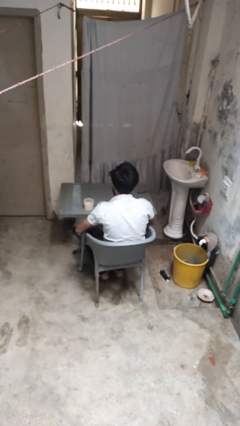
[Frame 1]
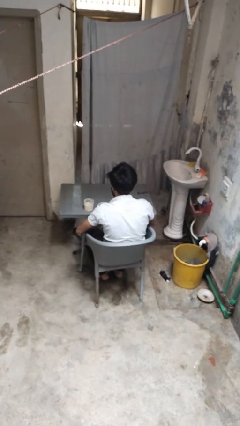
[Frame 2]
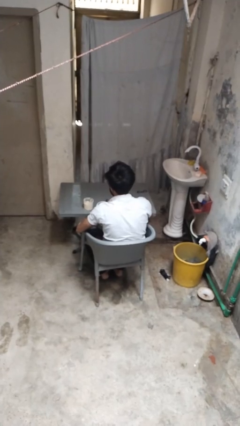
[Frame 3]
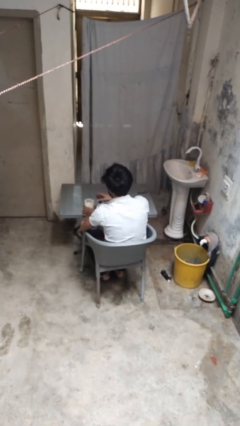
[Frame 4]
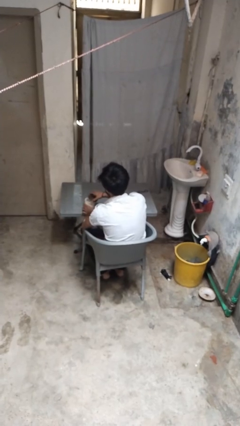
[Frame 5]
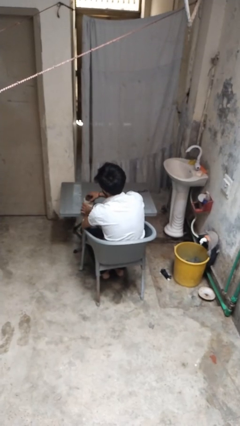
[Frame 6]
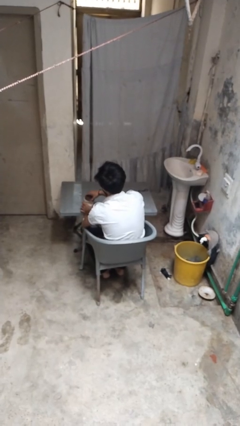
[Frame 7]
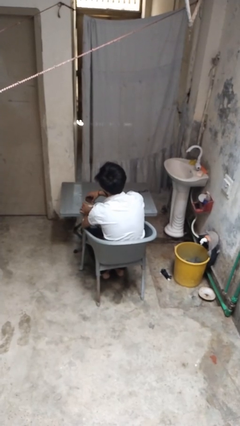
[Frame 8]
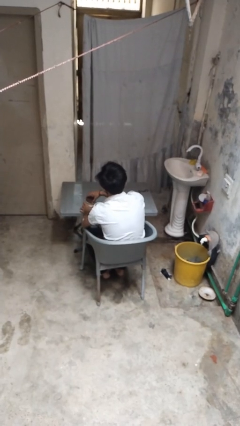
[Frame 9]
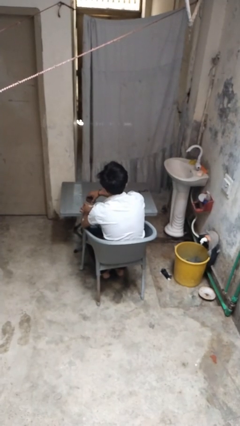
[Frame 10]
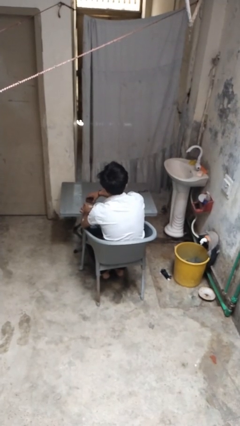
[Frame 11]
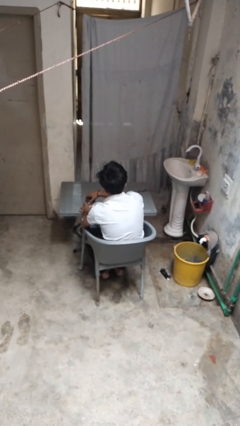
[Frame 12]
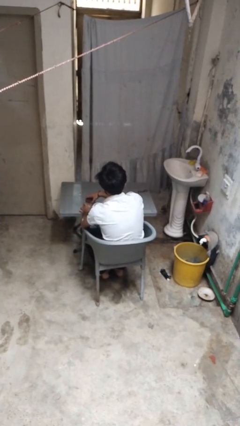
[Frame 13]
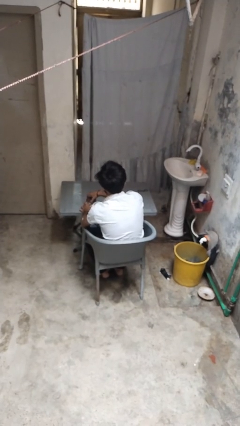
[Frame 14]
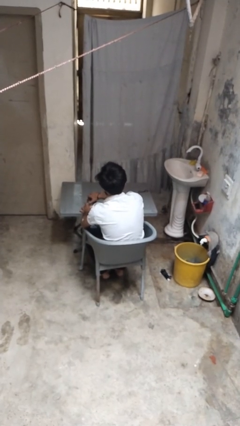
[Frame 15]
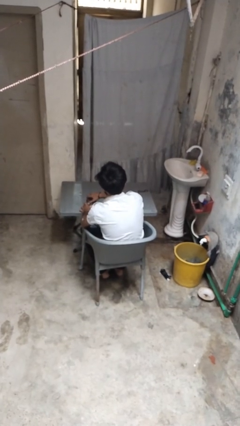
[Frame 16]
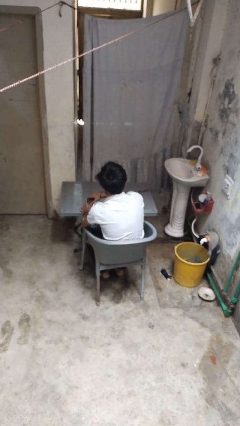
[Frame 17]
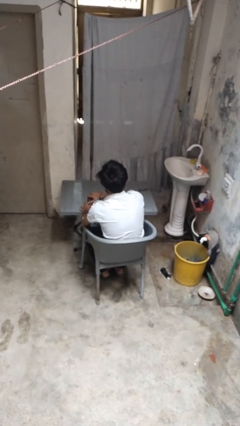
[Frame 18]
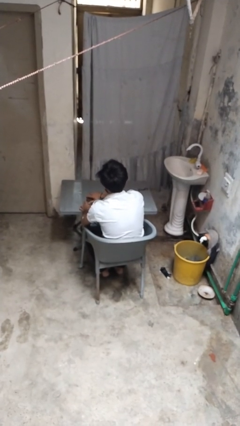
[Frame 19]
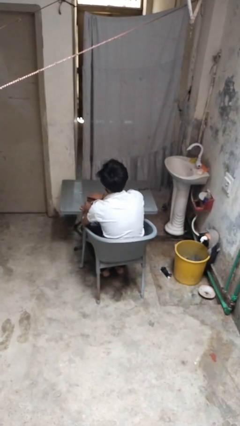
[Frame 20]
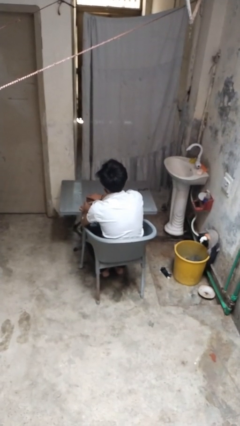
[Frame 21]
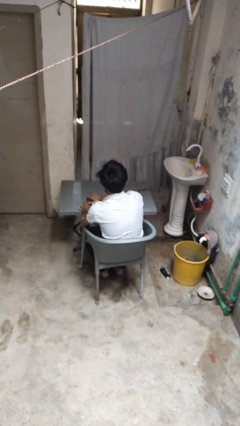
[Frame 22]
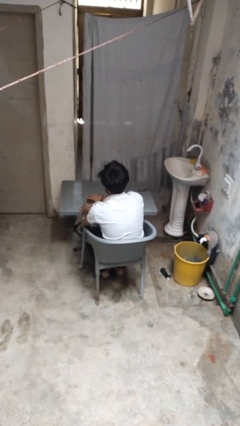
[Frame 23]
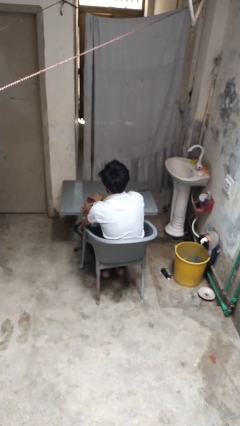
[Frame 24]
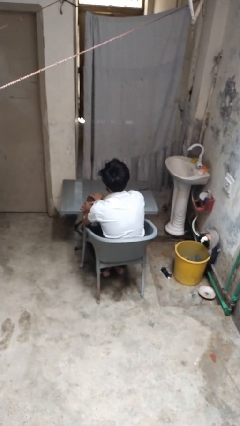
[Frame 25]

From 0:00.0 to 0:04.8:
person closes jar

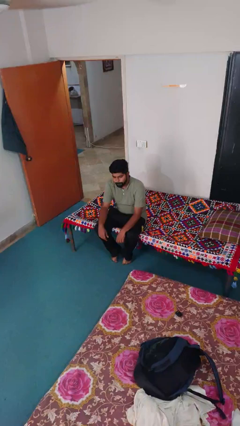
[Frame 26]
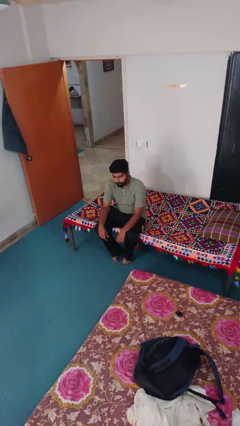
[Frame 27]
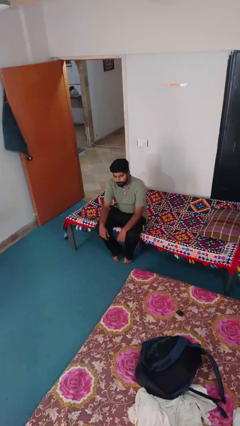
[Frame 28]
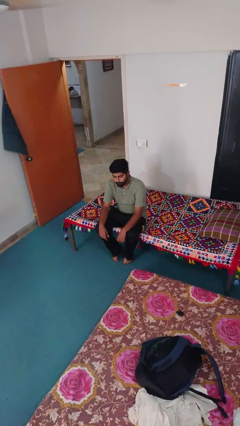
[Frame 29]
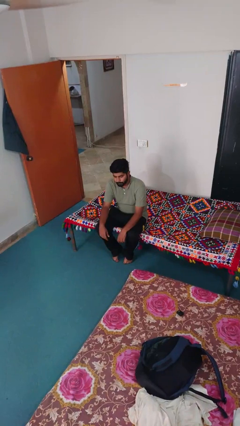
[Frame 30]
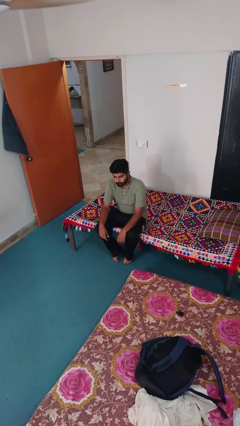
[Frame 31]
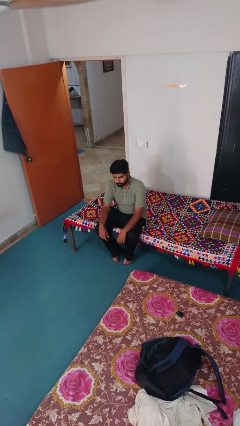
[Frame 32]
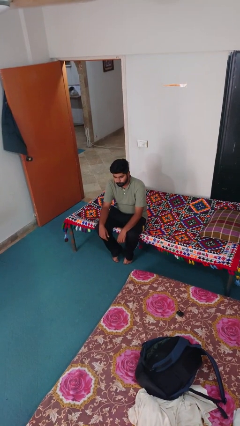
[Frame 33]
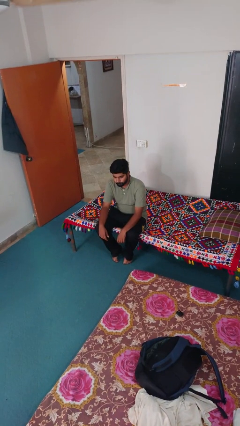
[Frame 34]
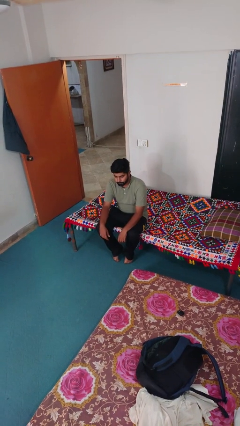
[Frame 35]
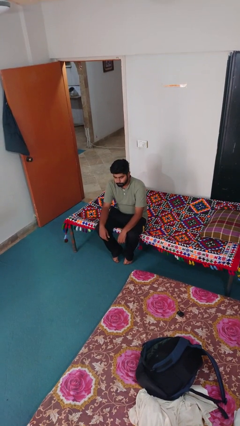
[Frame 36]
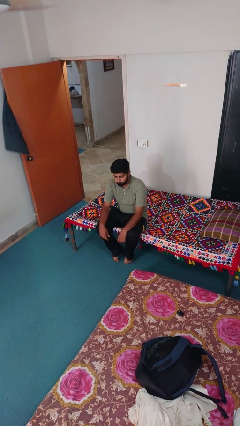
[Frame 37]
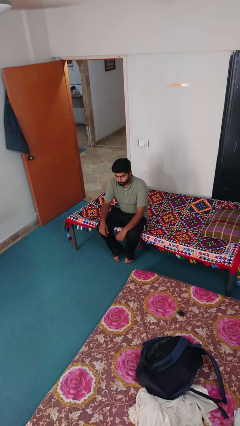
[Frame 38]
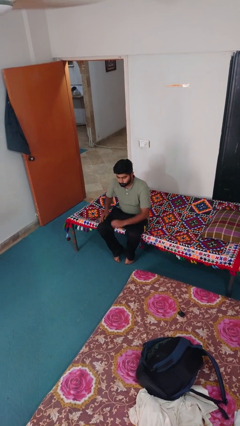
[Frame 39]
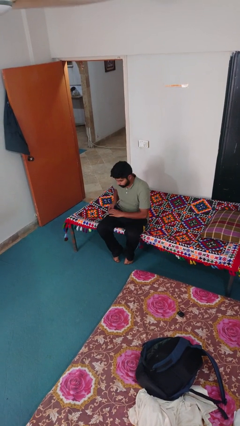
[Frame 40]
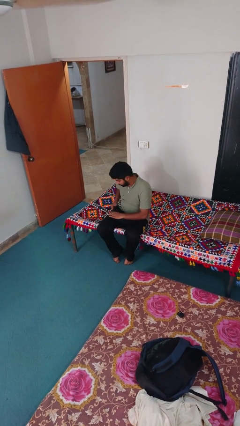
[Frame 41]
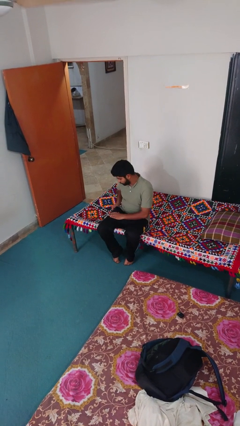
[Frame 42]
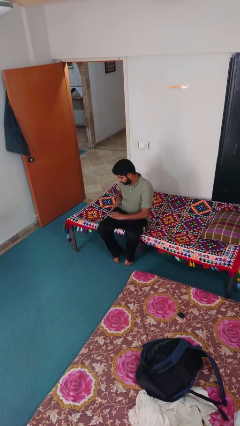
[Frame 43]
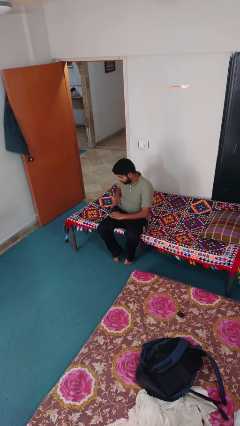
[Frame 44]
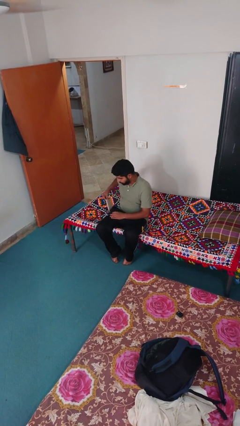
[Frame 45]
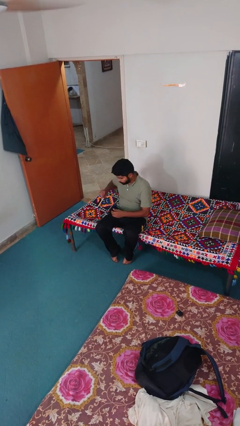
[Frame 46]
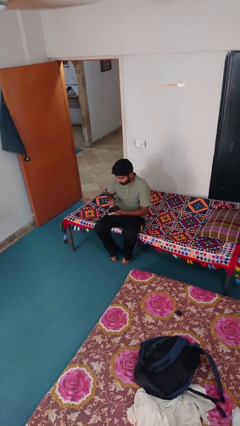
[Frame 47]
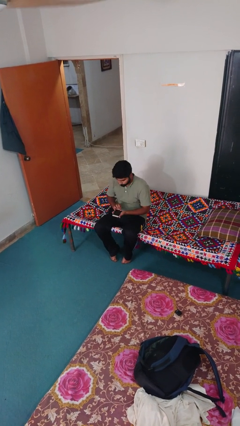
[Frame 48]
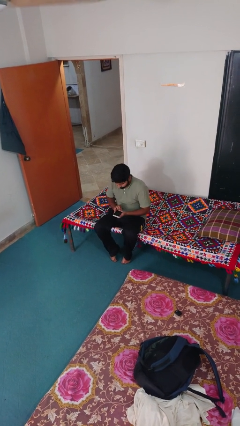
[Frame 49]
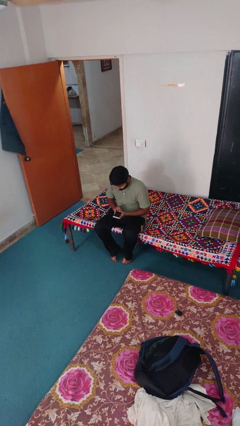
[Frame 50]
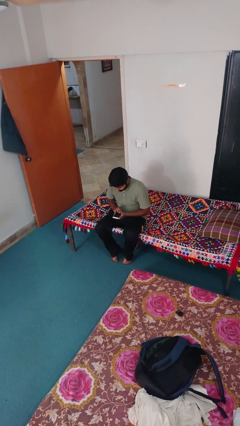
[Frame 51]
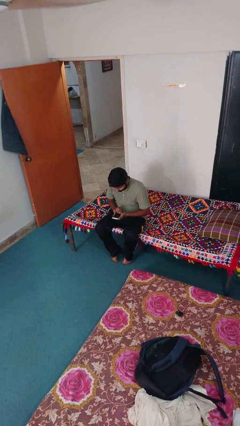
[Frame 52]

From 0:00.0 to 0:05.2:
person takes phone from pocket

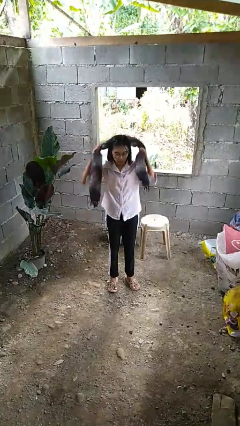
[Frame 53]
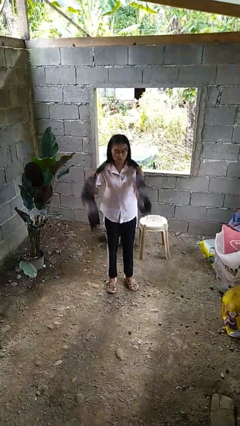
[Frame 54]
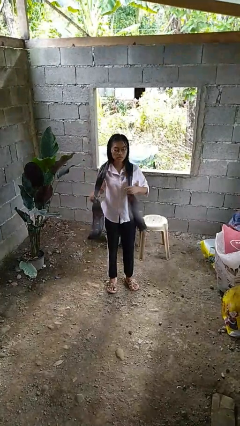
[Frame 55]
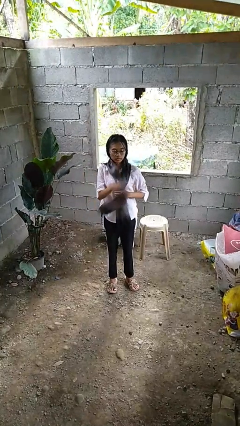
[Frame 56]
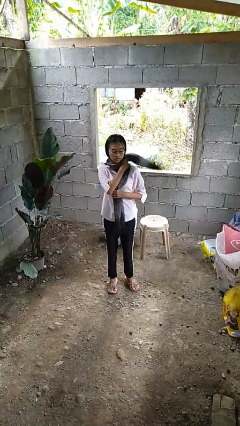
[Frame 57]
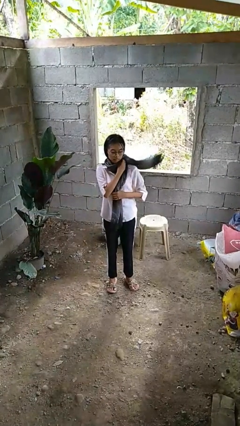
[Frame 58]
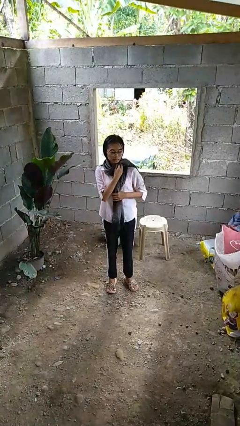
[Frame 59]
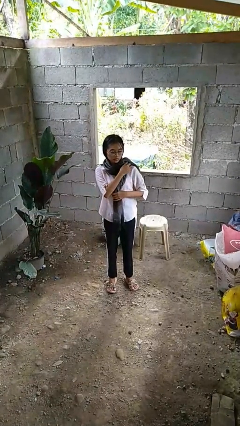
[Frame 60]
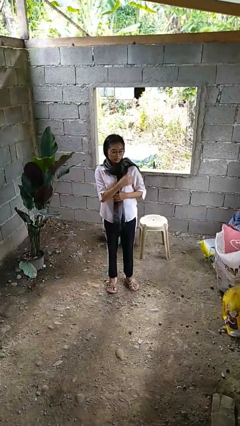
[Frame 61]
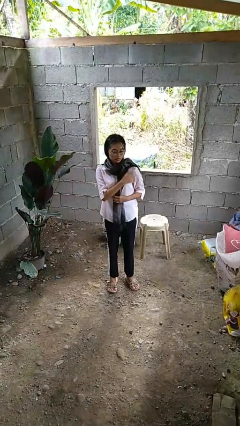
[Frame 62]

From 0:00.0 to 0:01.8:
person puts on scarf

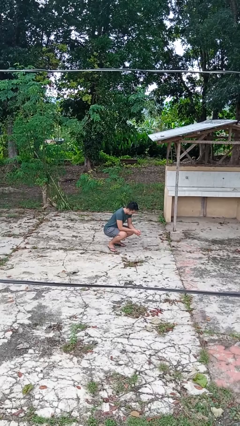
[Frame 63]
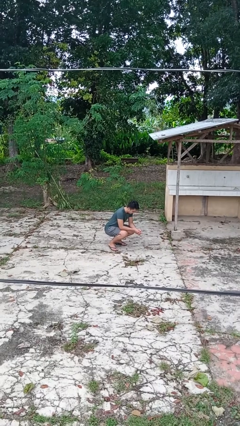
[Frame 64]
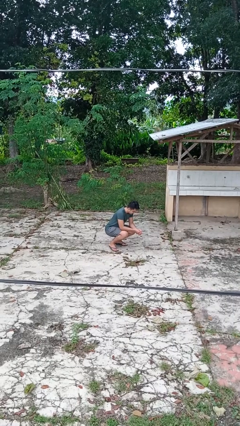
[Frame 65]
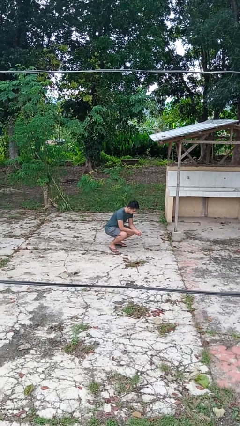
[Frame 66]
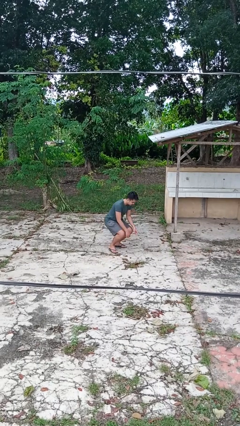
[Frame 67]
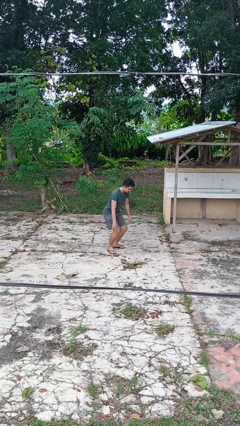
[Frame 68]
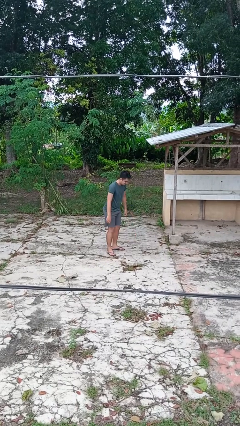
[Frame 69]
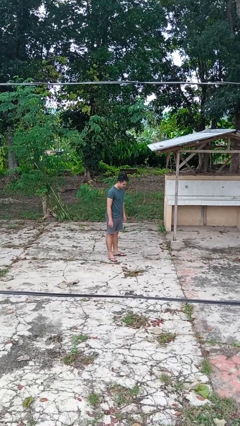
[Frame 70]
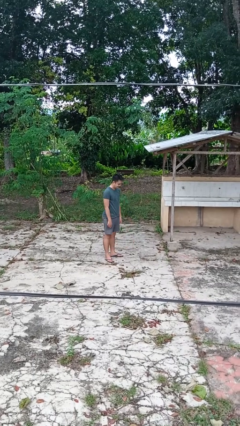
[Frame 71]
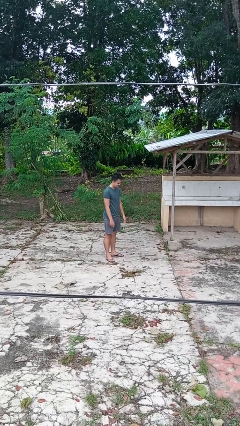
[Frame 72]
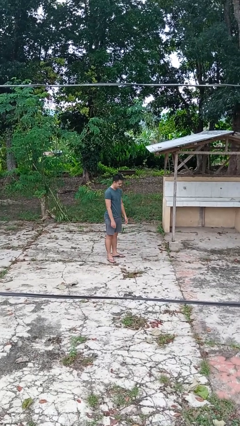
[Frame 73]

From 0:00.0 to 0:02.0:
person stands up

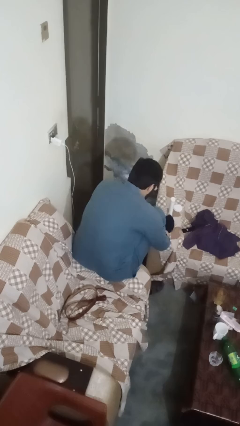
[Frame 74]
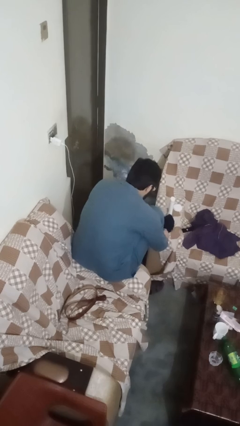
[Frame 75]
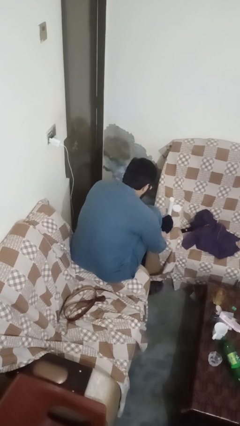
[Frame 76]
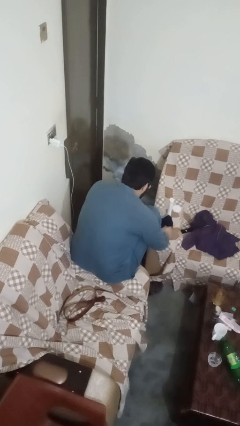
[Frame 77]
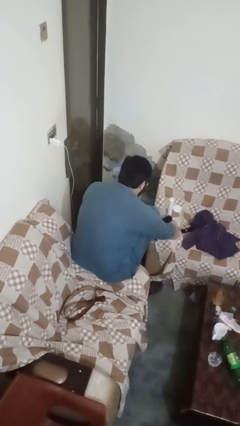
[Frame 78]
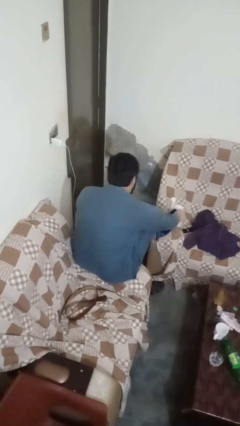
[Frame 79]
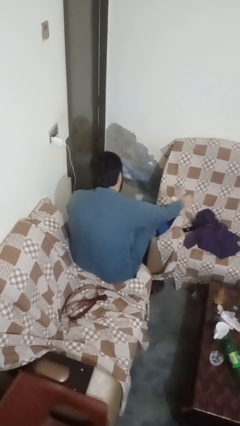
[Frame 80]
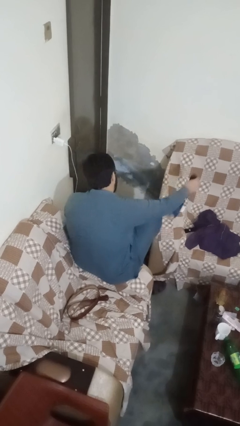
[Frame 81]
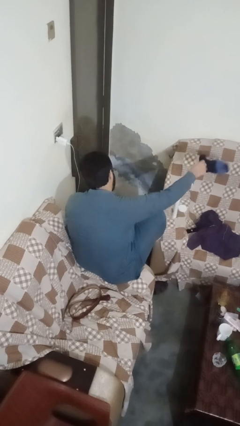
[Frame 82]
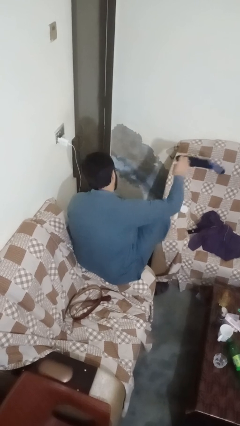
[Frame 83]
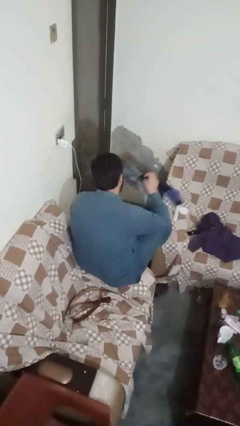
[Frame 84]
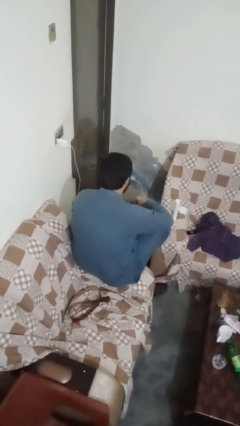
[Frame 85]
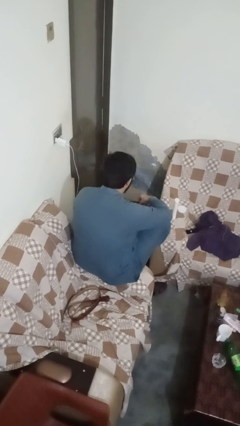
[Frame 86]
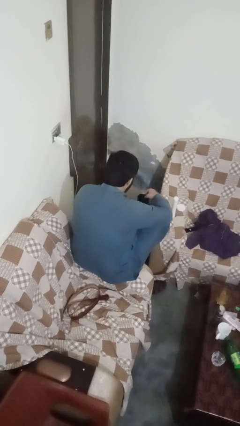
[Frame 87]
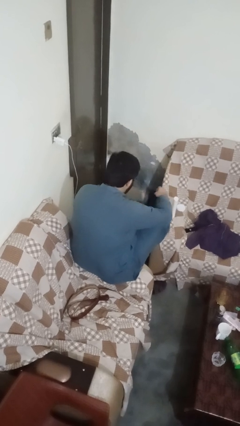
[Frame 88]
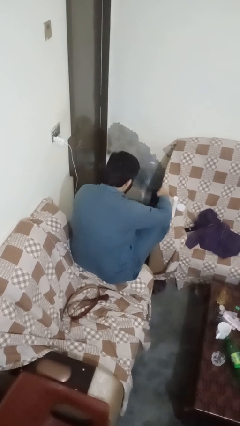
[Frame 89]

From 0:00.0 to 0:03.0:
person takes off socks

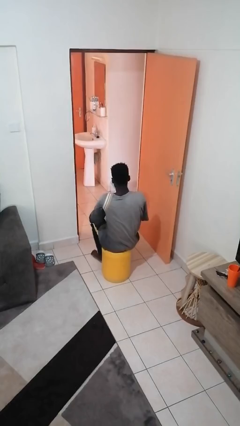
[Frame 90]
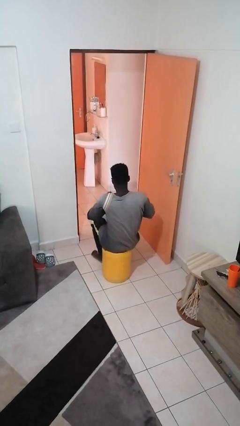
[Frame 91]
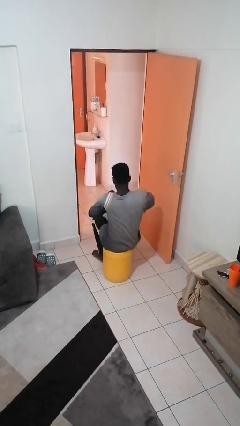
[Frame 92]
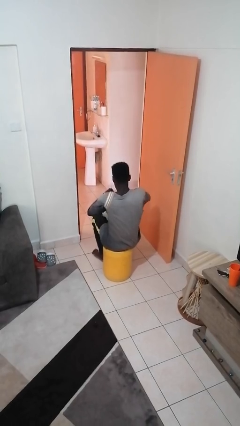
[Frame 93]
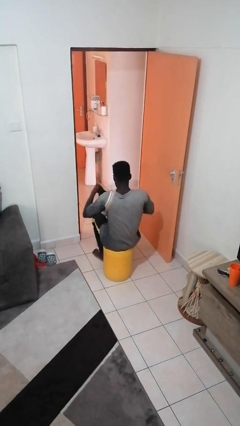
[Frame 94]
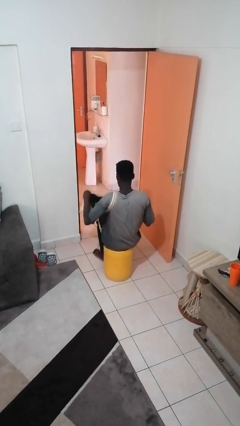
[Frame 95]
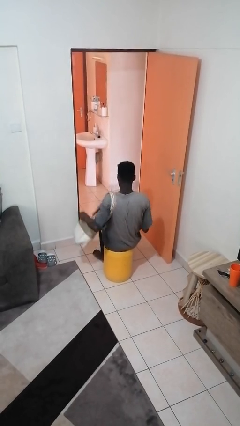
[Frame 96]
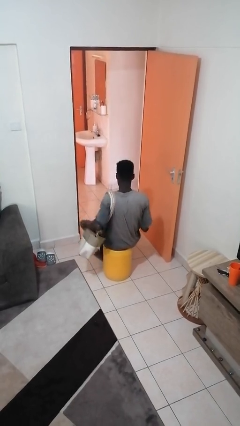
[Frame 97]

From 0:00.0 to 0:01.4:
person puts object into purse
